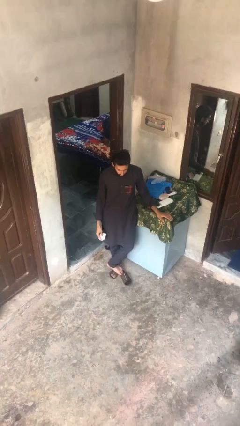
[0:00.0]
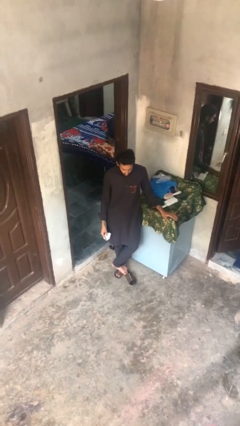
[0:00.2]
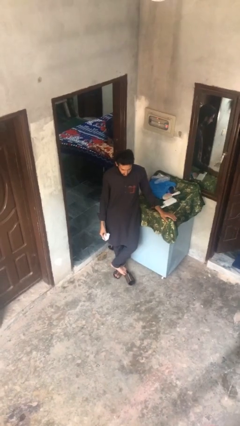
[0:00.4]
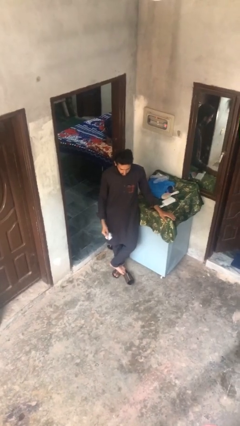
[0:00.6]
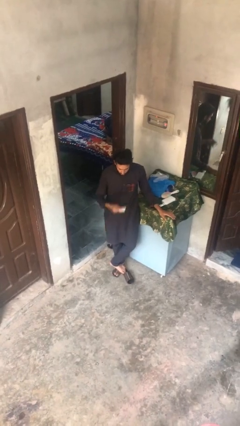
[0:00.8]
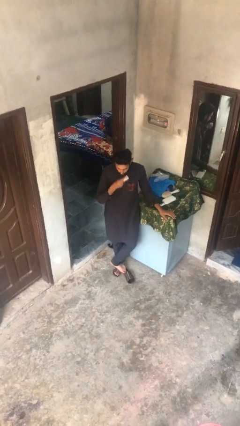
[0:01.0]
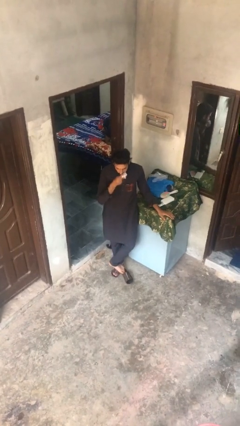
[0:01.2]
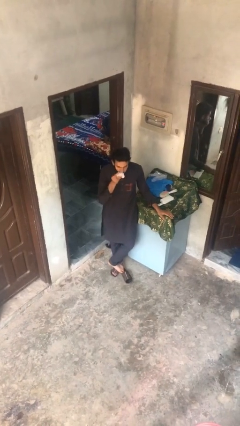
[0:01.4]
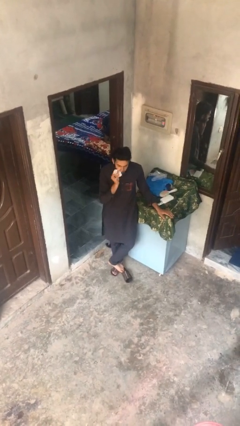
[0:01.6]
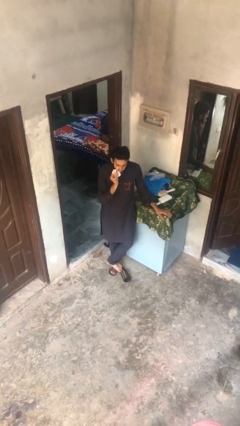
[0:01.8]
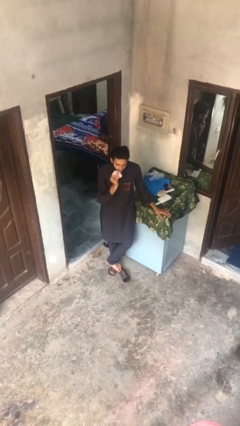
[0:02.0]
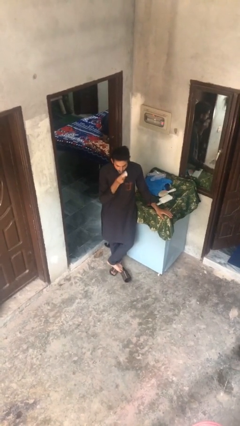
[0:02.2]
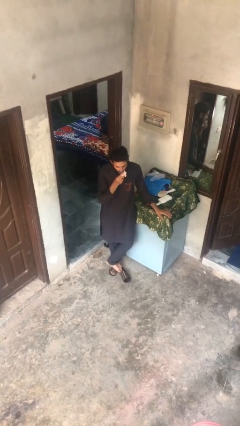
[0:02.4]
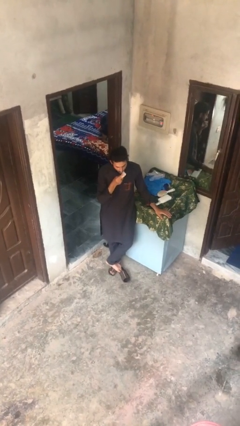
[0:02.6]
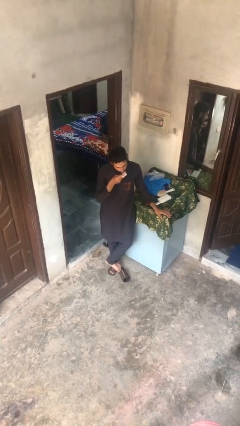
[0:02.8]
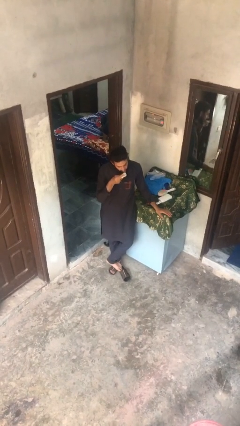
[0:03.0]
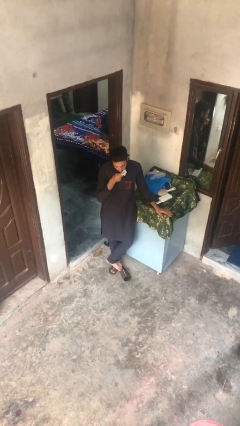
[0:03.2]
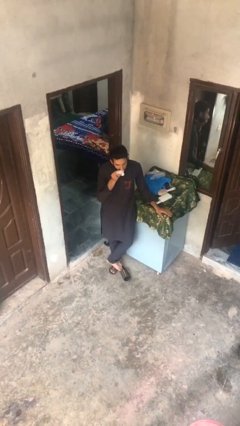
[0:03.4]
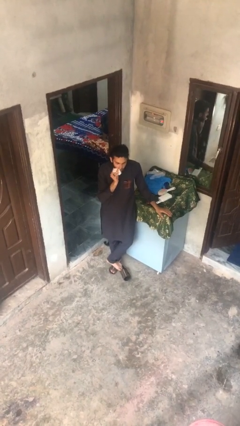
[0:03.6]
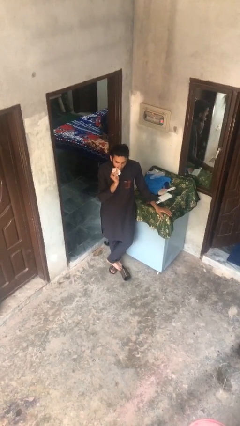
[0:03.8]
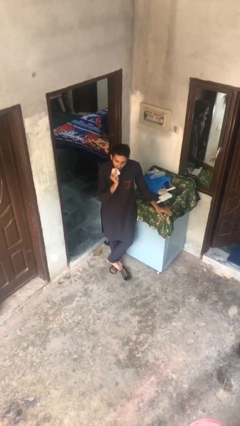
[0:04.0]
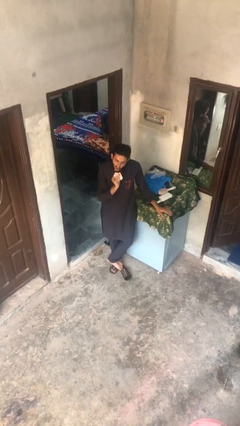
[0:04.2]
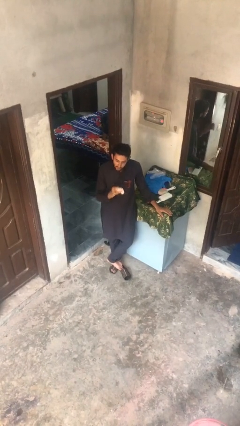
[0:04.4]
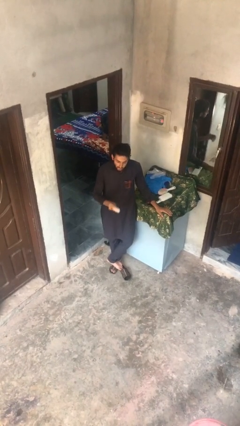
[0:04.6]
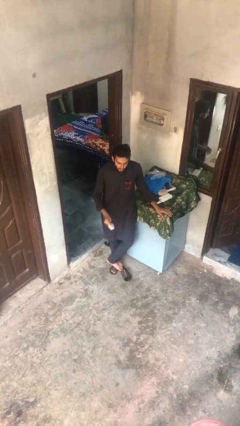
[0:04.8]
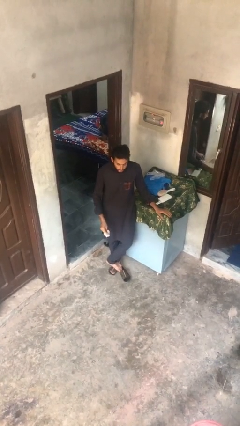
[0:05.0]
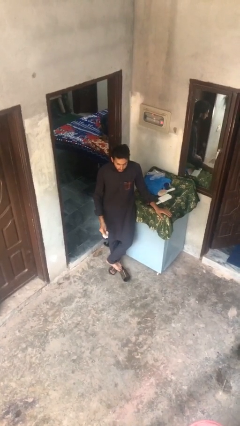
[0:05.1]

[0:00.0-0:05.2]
person wipes mouth with napkin

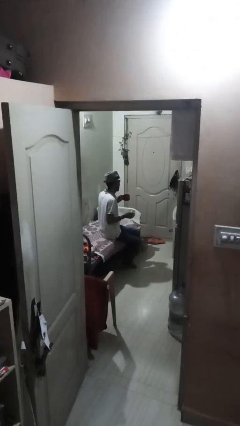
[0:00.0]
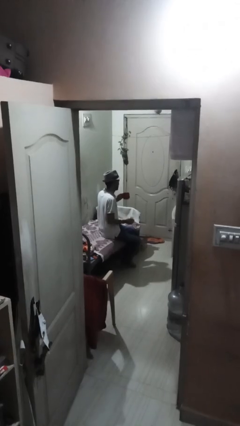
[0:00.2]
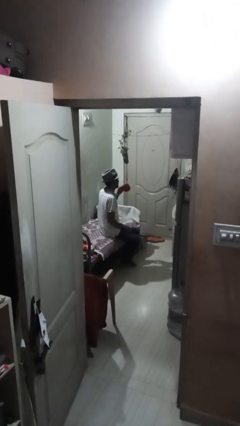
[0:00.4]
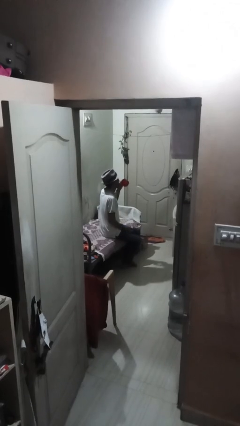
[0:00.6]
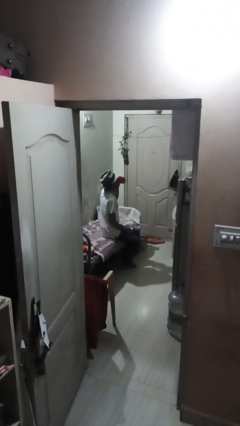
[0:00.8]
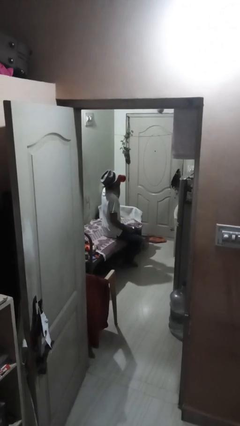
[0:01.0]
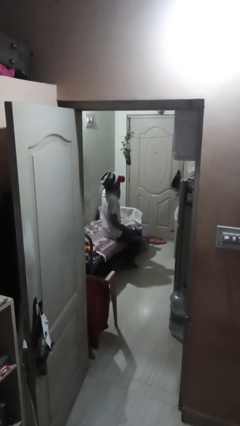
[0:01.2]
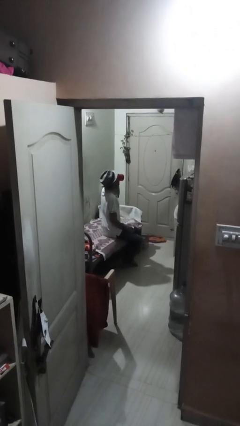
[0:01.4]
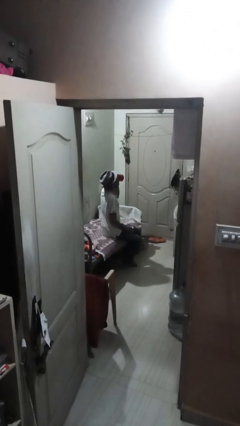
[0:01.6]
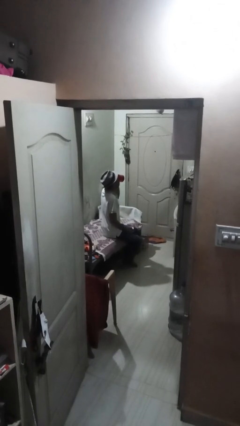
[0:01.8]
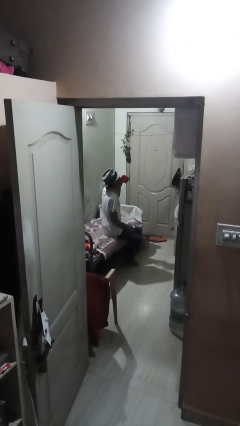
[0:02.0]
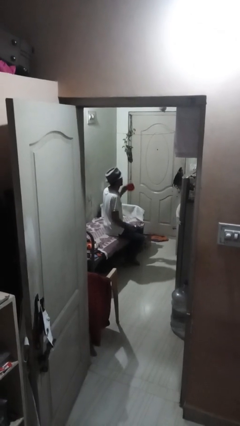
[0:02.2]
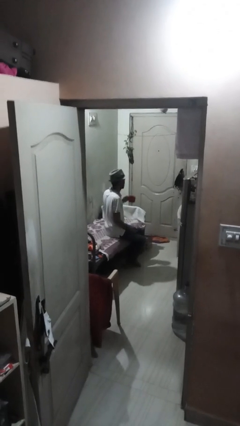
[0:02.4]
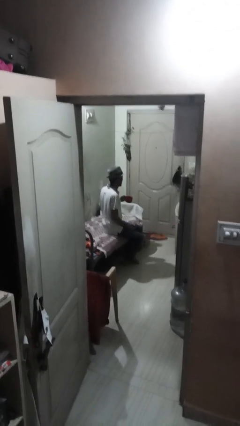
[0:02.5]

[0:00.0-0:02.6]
person drinks from mug

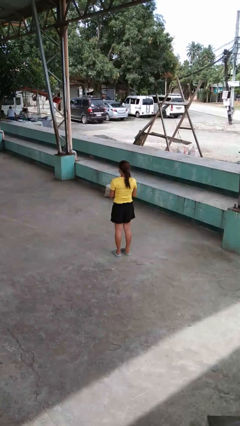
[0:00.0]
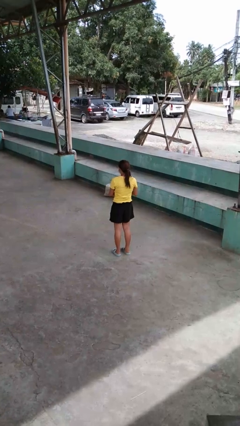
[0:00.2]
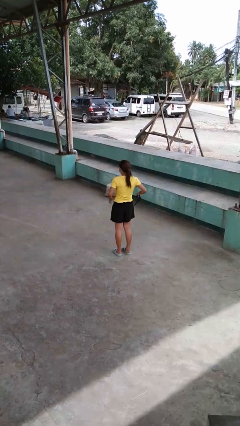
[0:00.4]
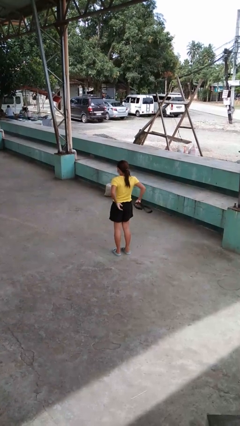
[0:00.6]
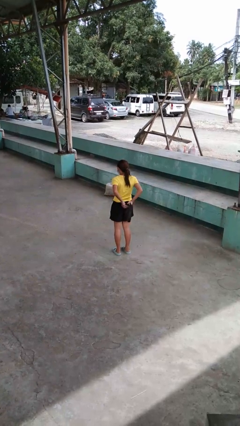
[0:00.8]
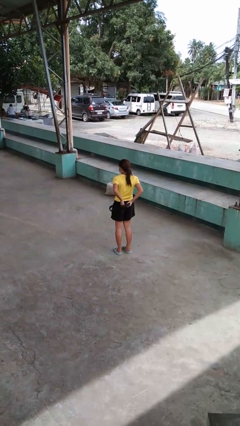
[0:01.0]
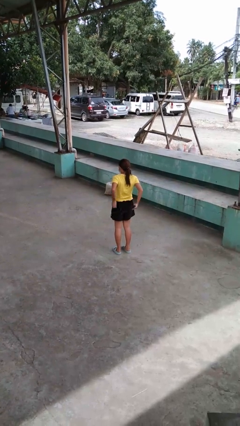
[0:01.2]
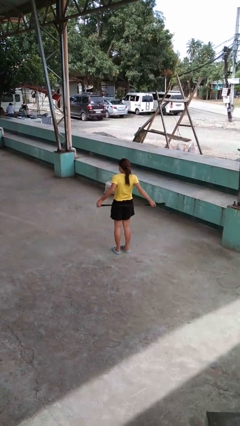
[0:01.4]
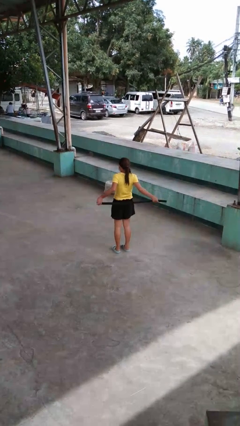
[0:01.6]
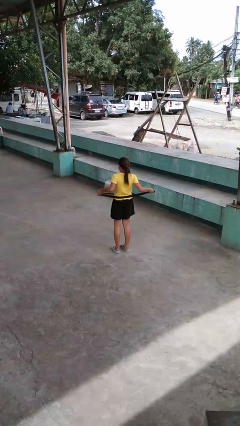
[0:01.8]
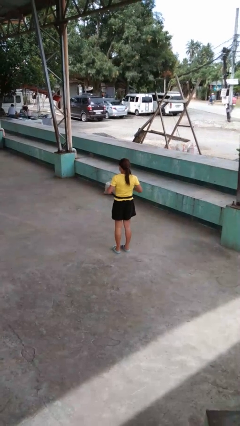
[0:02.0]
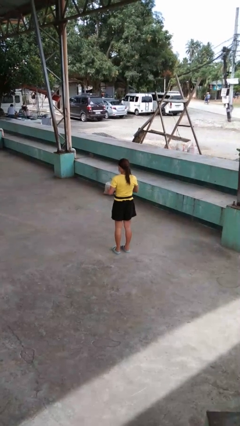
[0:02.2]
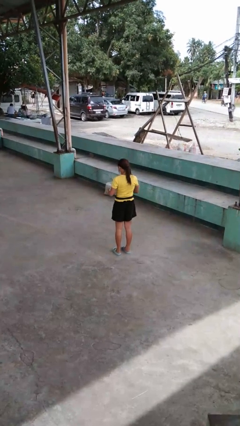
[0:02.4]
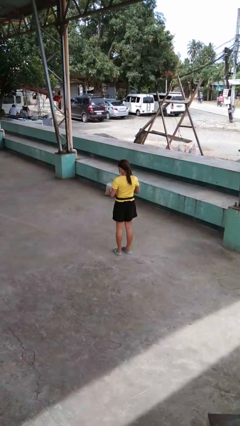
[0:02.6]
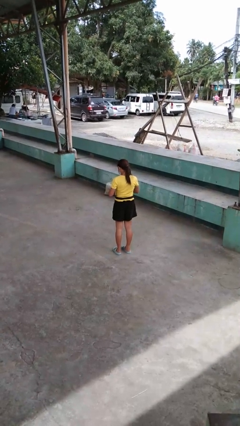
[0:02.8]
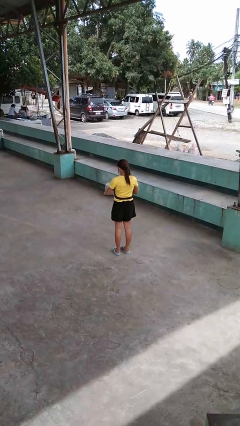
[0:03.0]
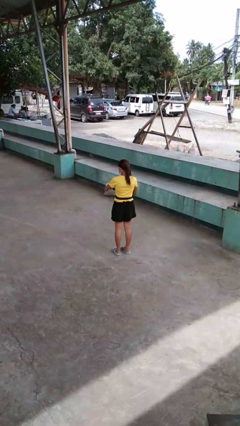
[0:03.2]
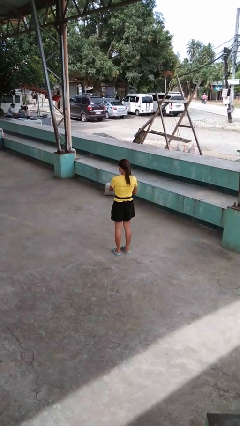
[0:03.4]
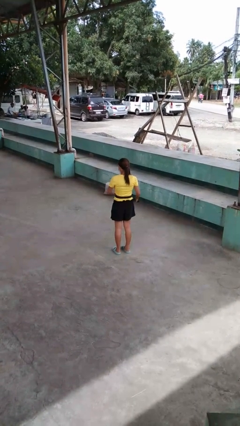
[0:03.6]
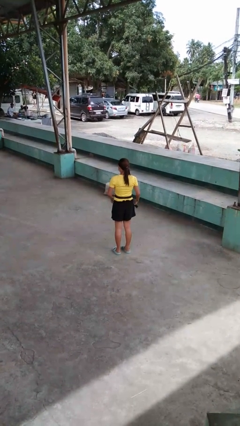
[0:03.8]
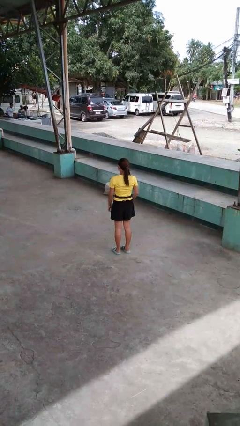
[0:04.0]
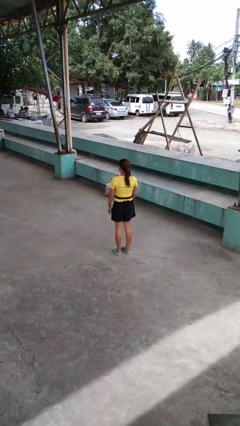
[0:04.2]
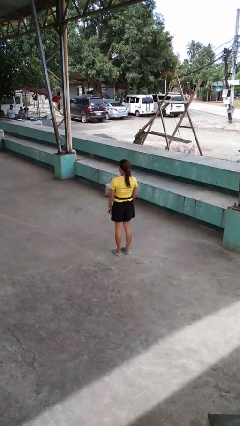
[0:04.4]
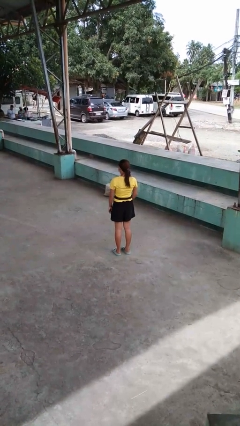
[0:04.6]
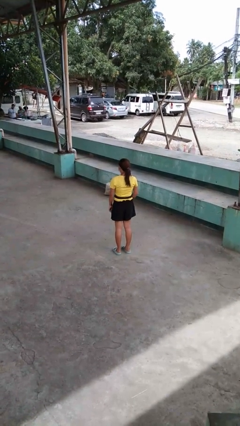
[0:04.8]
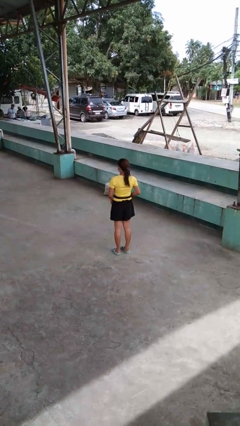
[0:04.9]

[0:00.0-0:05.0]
person puts on belt

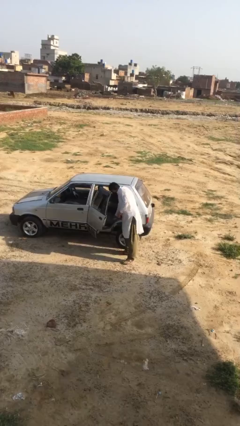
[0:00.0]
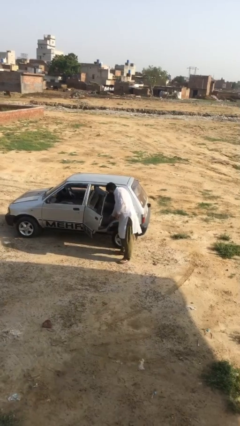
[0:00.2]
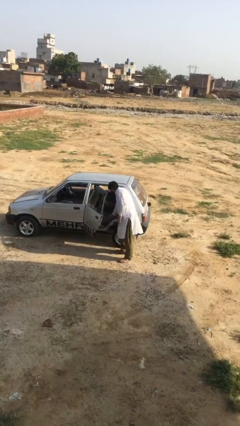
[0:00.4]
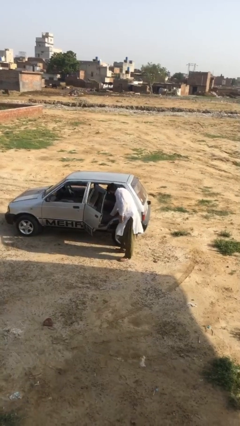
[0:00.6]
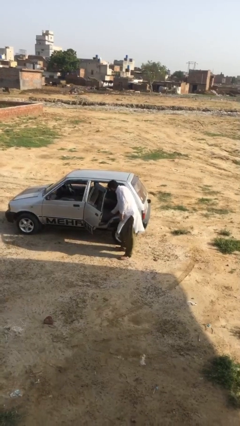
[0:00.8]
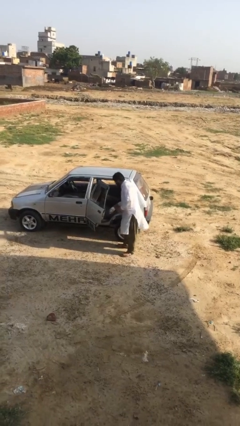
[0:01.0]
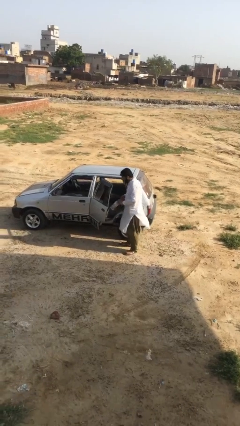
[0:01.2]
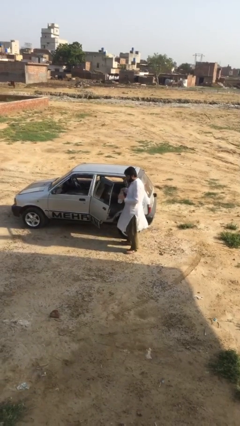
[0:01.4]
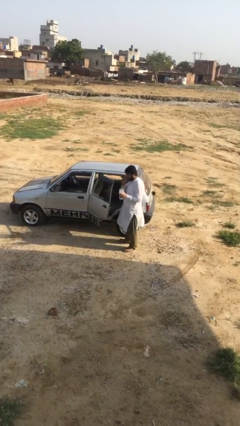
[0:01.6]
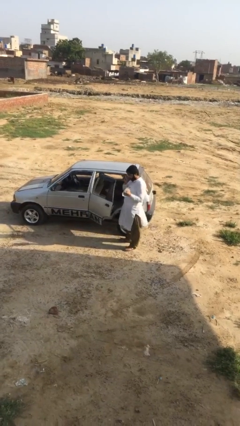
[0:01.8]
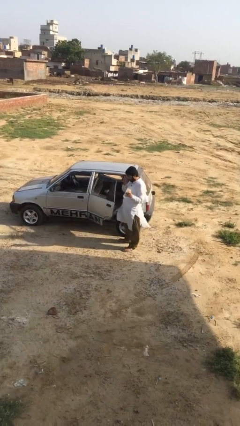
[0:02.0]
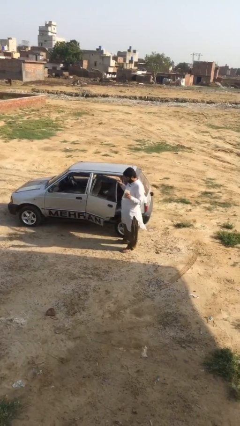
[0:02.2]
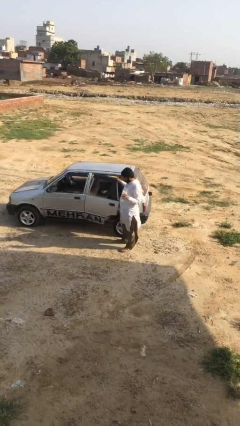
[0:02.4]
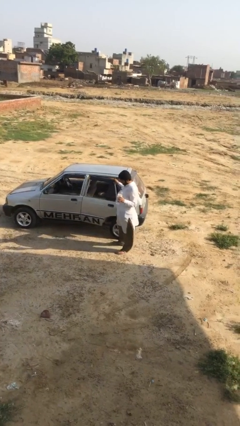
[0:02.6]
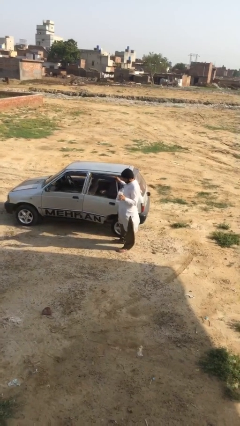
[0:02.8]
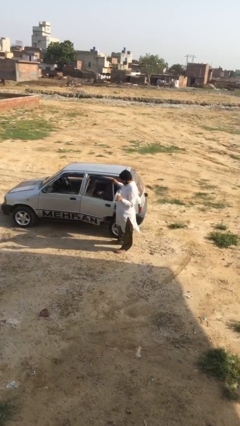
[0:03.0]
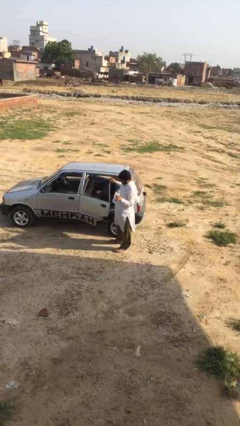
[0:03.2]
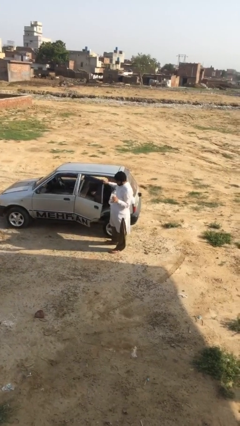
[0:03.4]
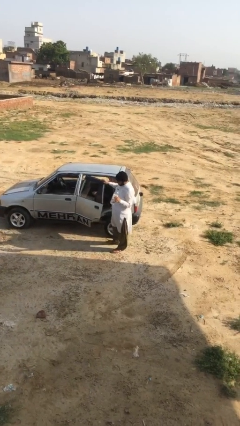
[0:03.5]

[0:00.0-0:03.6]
person unloads car

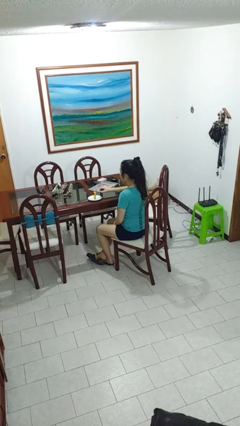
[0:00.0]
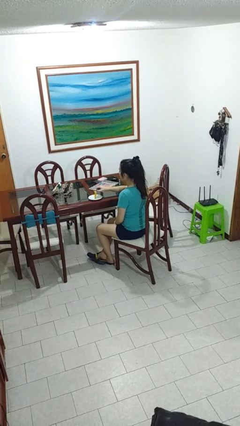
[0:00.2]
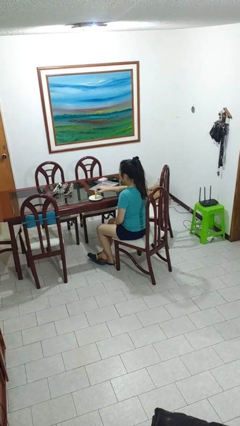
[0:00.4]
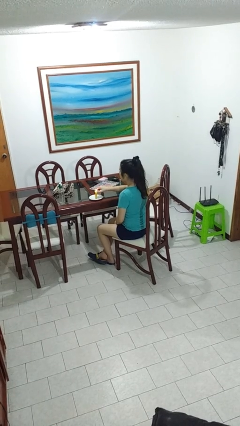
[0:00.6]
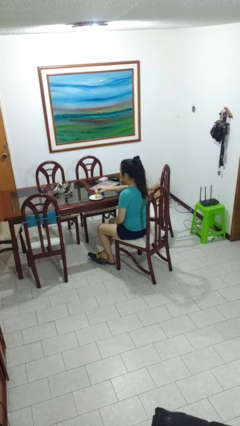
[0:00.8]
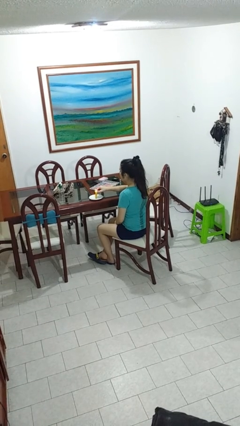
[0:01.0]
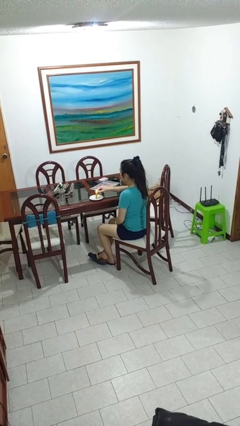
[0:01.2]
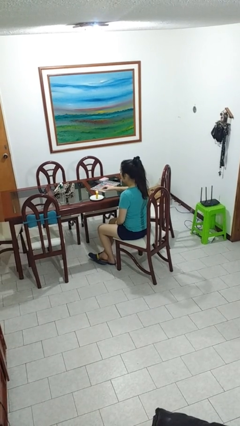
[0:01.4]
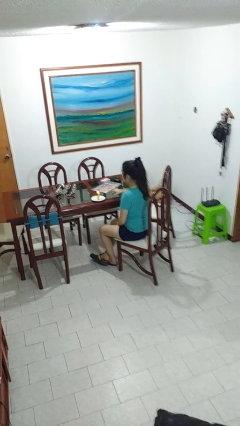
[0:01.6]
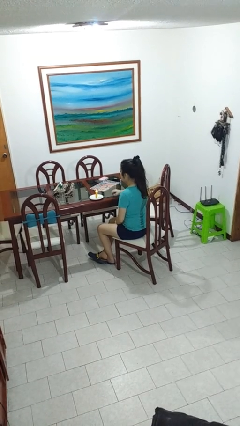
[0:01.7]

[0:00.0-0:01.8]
person lights candle
